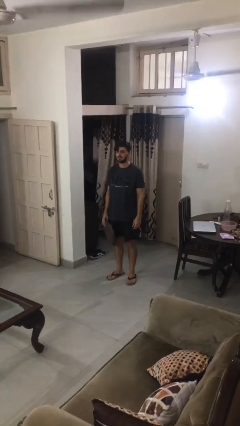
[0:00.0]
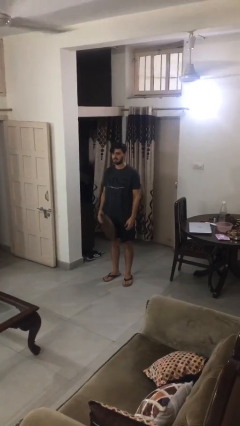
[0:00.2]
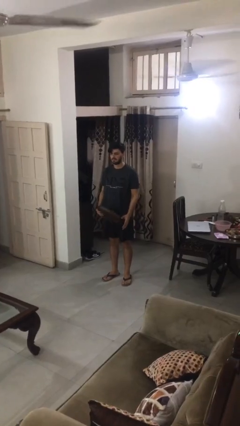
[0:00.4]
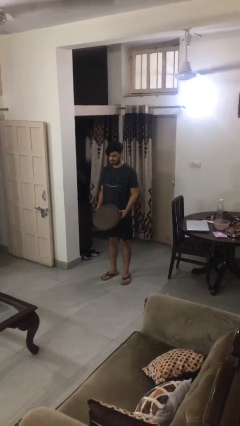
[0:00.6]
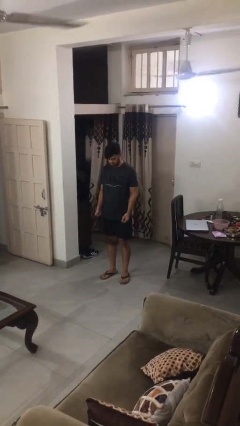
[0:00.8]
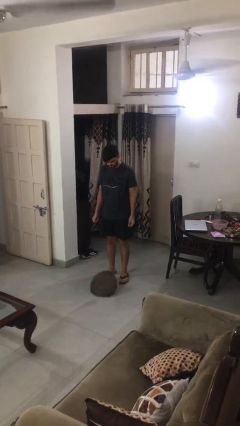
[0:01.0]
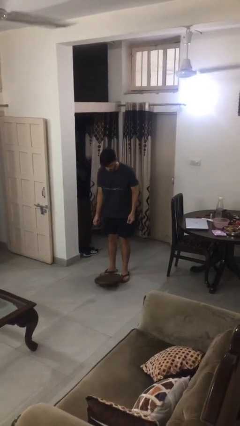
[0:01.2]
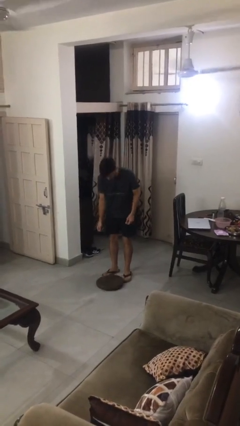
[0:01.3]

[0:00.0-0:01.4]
person drops object

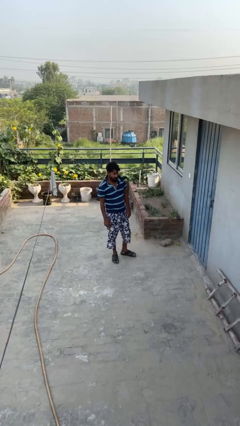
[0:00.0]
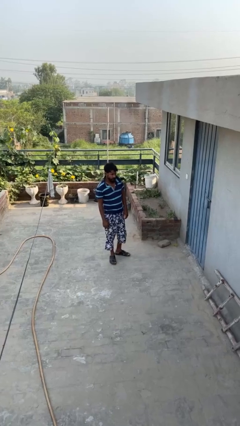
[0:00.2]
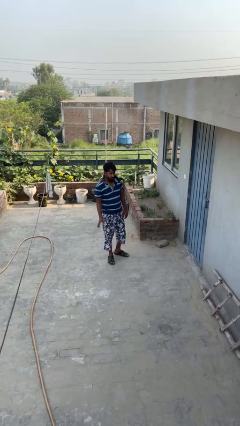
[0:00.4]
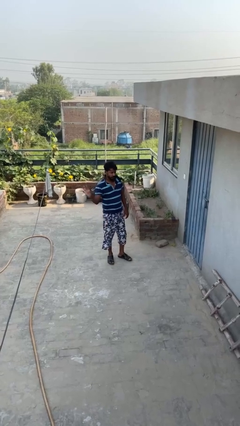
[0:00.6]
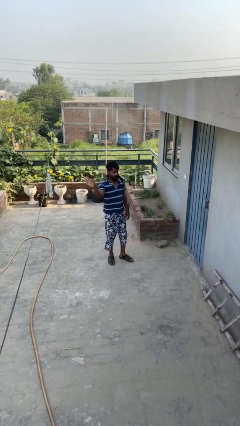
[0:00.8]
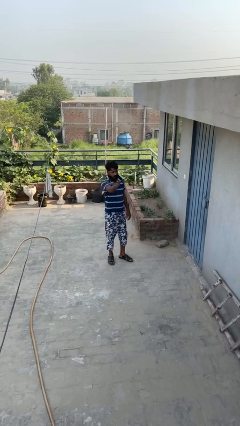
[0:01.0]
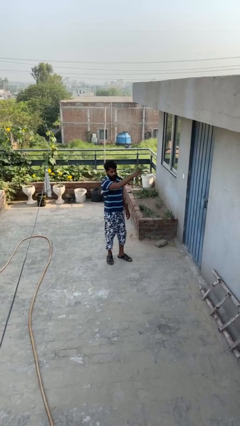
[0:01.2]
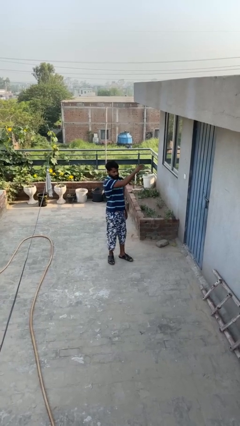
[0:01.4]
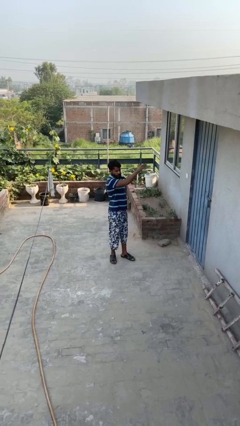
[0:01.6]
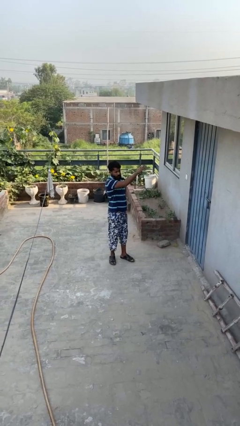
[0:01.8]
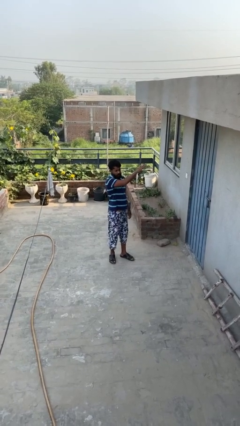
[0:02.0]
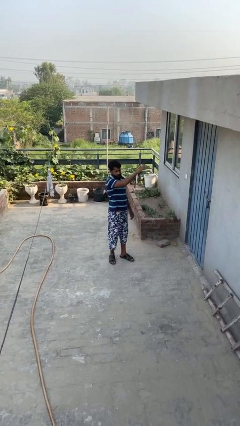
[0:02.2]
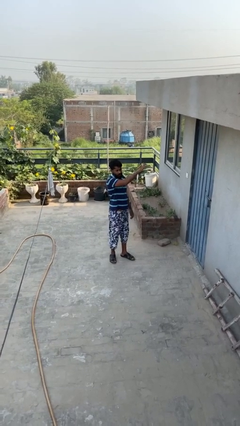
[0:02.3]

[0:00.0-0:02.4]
person gestures swipe left

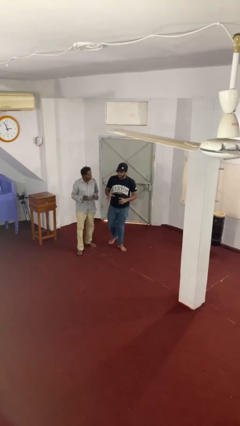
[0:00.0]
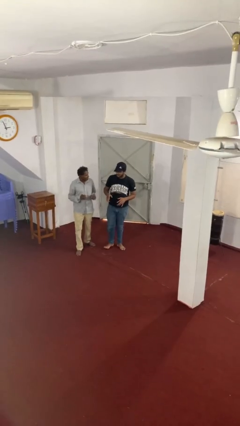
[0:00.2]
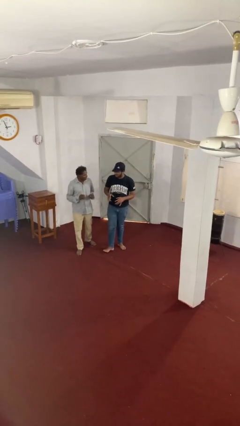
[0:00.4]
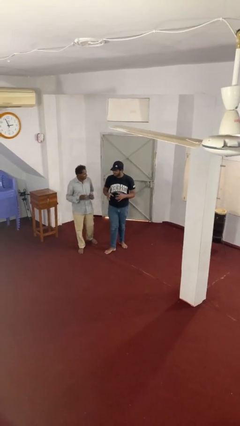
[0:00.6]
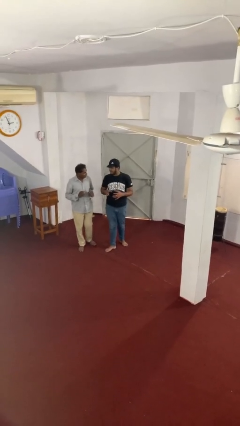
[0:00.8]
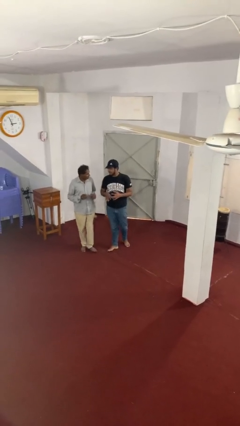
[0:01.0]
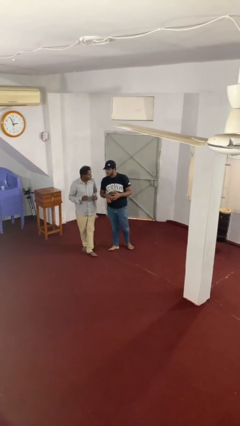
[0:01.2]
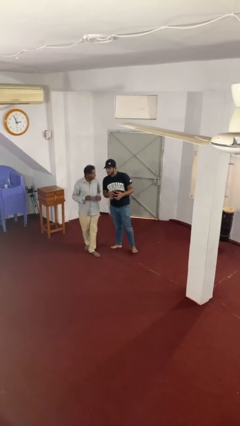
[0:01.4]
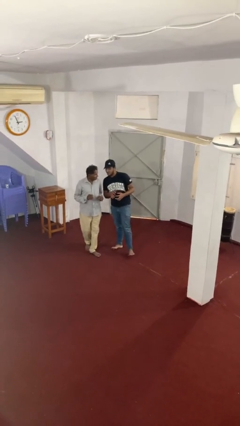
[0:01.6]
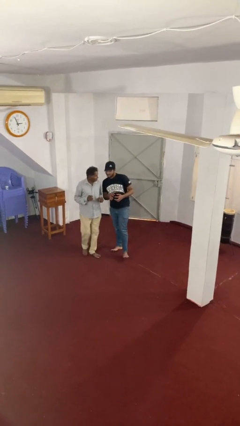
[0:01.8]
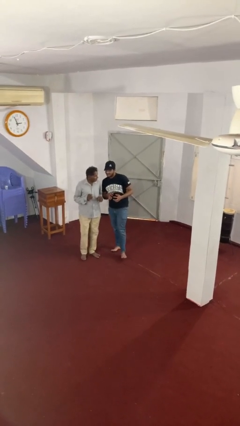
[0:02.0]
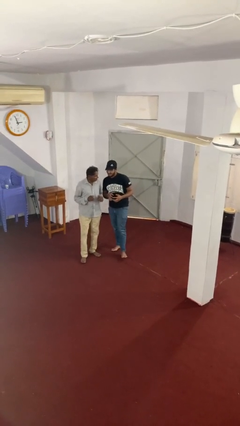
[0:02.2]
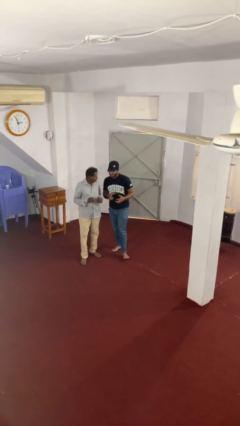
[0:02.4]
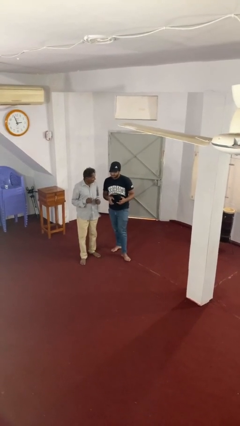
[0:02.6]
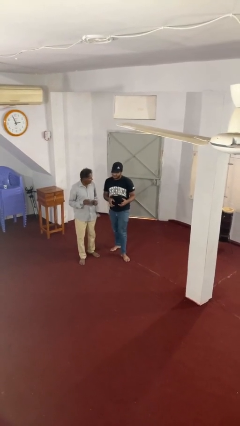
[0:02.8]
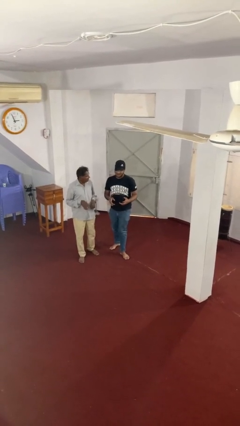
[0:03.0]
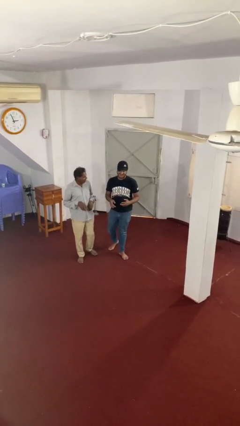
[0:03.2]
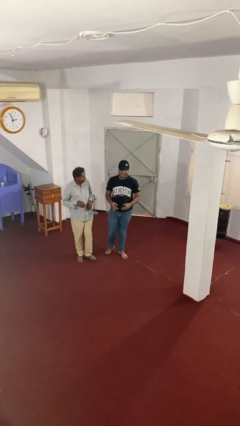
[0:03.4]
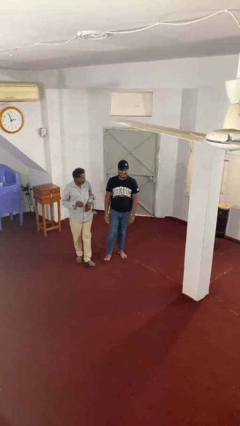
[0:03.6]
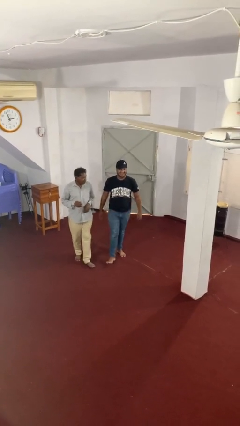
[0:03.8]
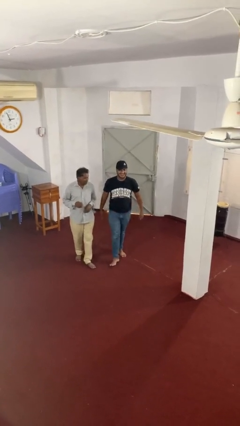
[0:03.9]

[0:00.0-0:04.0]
person talks to person

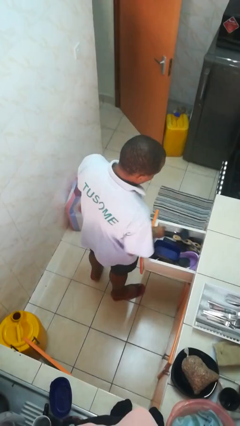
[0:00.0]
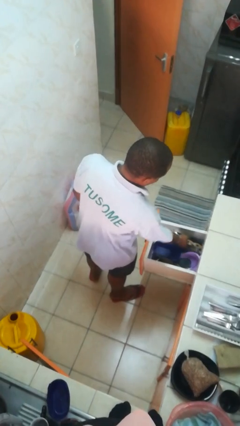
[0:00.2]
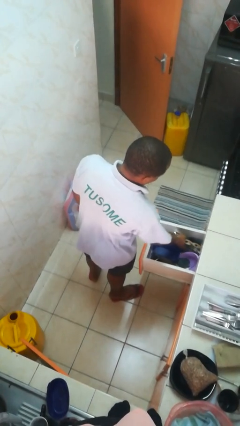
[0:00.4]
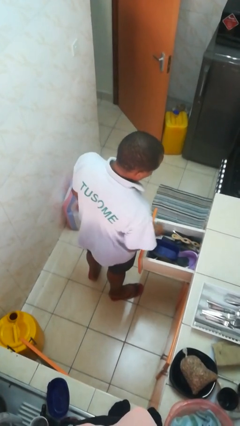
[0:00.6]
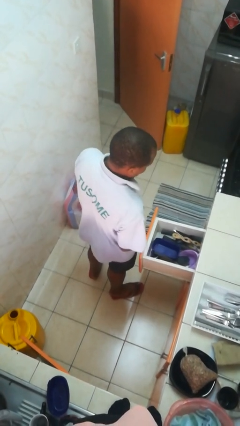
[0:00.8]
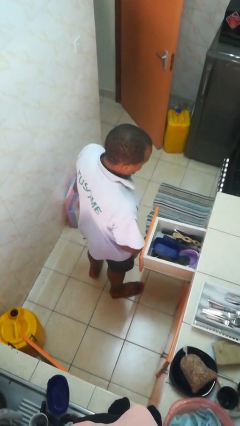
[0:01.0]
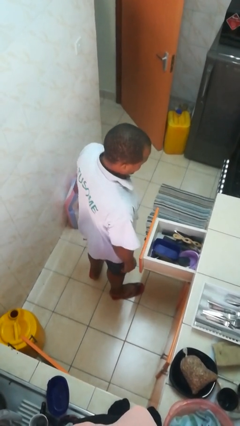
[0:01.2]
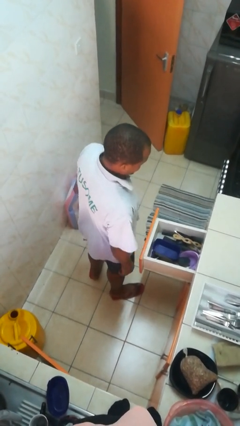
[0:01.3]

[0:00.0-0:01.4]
person puts object into kitchen drawer

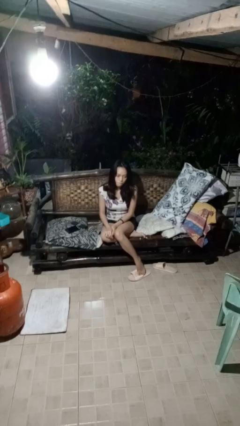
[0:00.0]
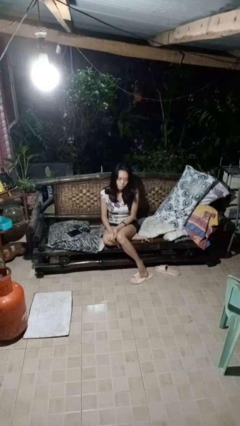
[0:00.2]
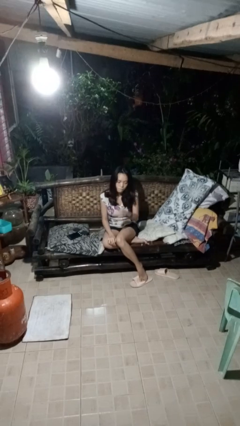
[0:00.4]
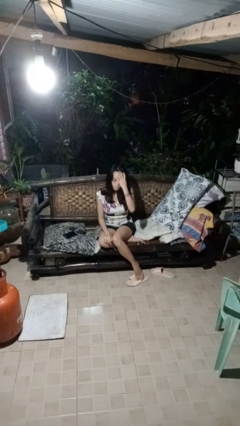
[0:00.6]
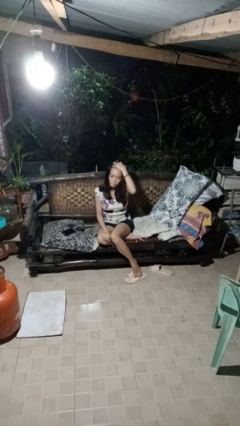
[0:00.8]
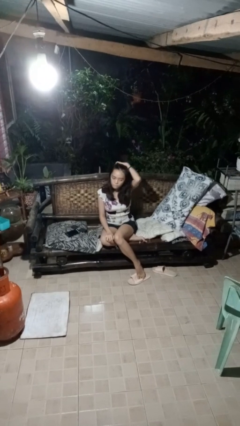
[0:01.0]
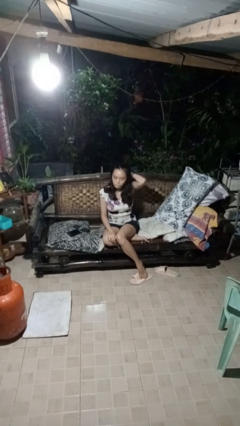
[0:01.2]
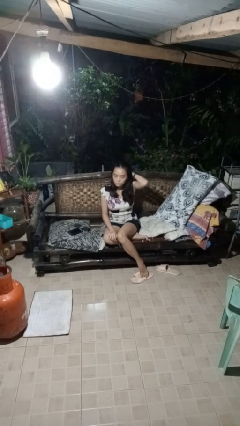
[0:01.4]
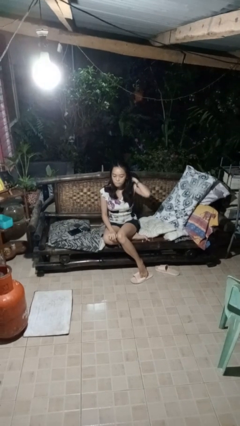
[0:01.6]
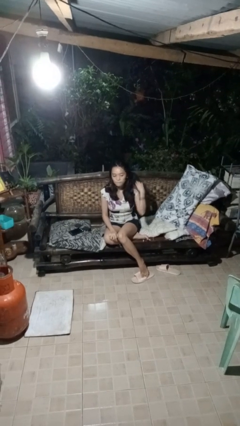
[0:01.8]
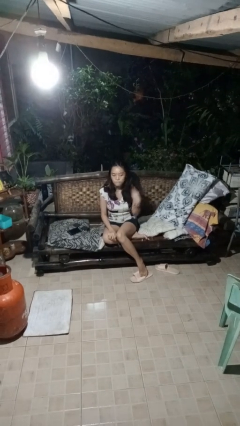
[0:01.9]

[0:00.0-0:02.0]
person searches in couch

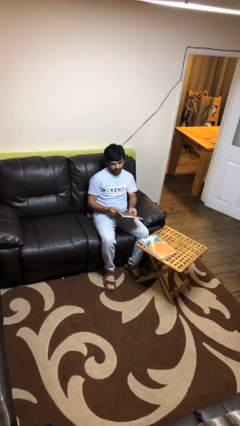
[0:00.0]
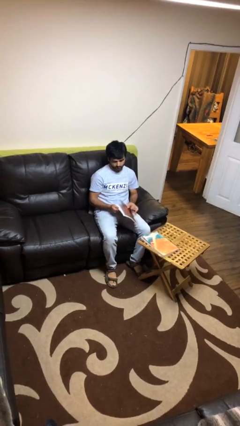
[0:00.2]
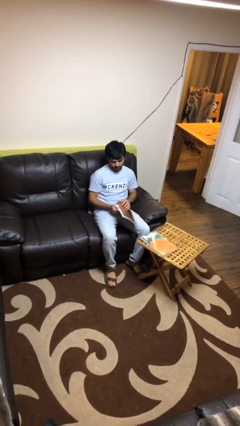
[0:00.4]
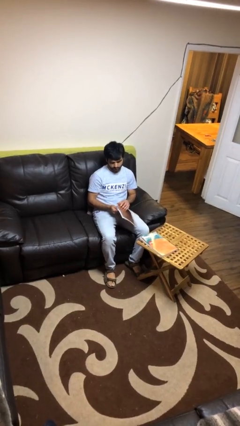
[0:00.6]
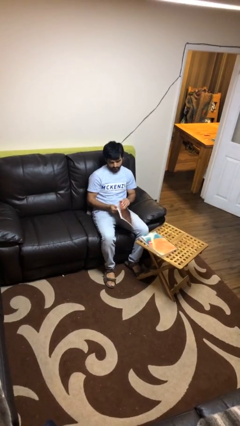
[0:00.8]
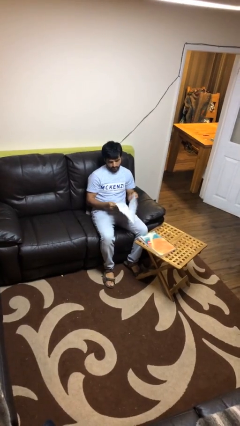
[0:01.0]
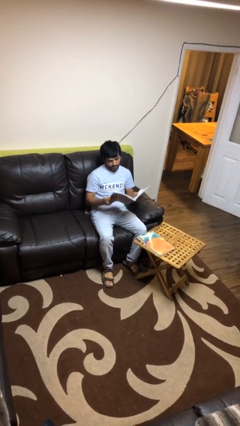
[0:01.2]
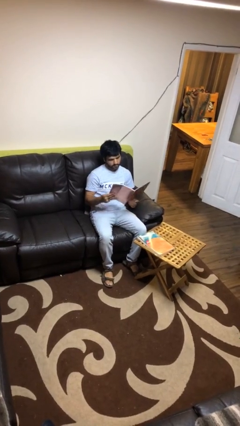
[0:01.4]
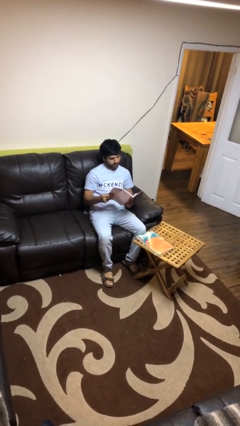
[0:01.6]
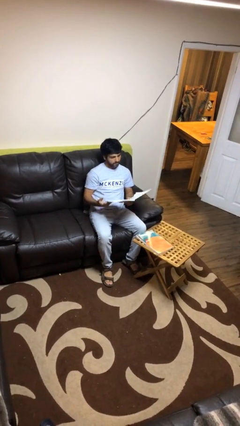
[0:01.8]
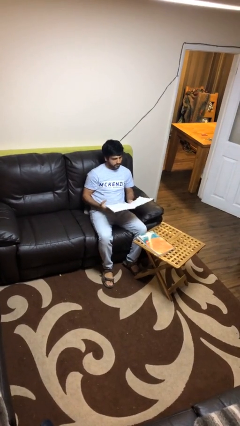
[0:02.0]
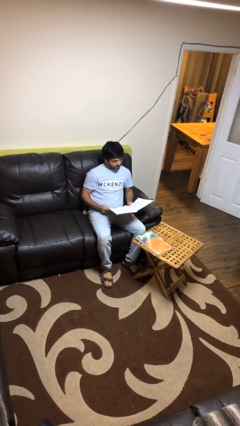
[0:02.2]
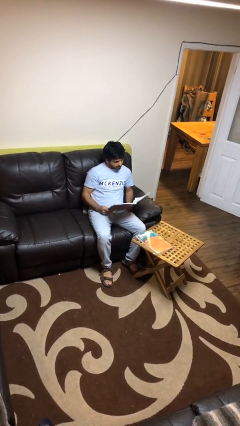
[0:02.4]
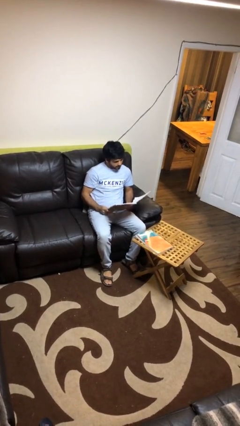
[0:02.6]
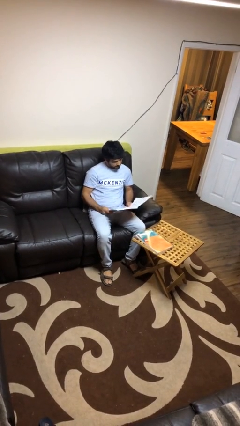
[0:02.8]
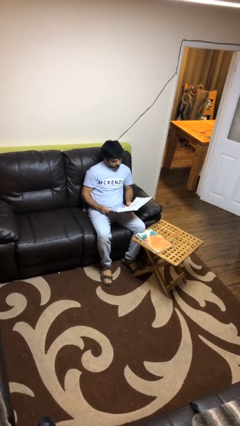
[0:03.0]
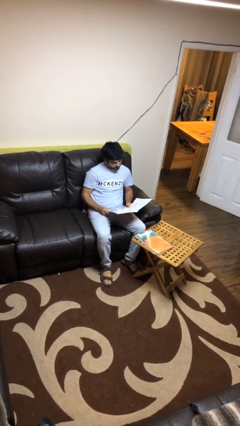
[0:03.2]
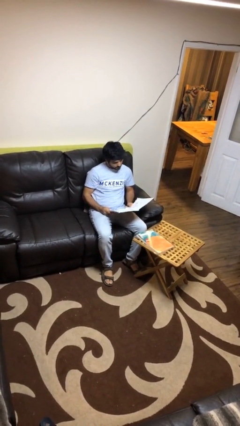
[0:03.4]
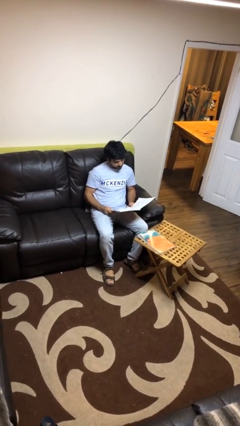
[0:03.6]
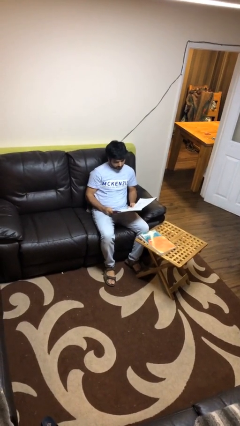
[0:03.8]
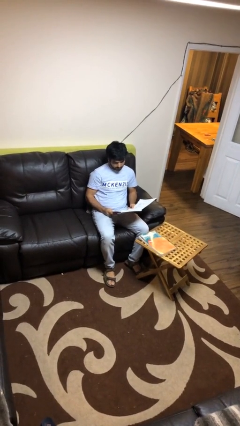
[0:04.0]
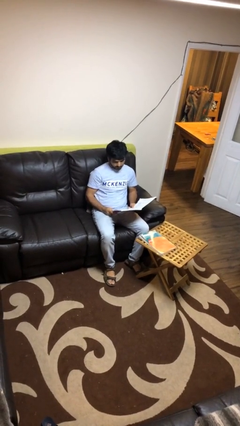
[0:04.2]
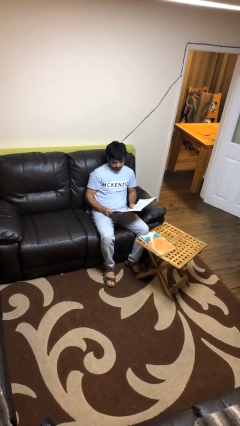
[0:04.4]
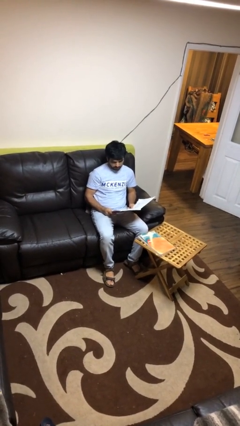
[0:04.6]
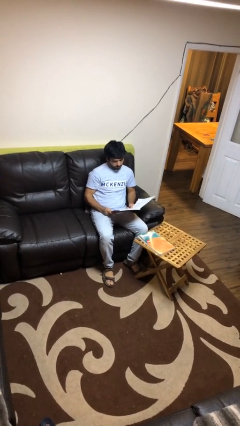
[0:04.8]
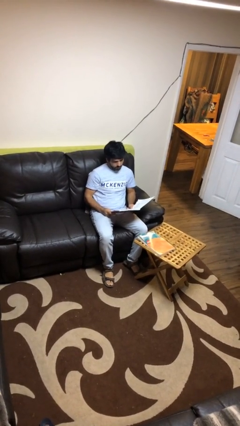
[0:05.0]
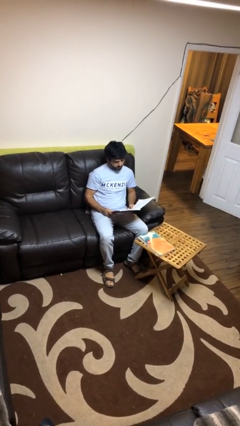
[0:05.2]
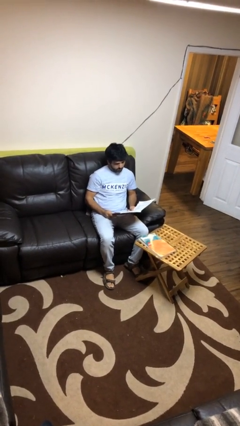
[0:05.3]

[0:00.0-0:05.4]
person reads document

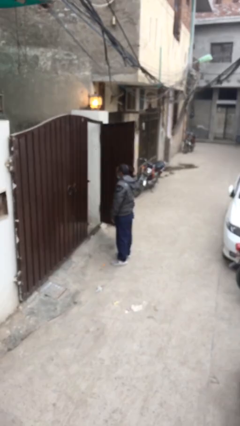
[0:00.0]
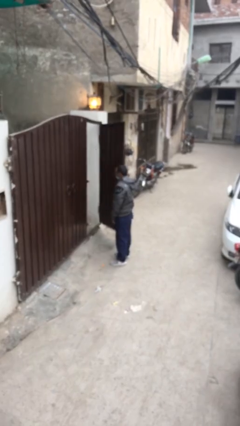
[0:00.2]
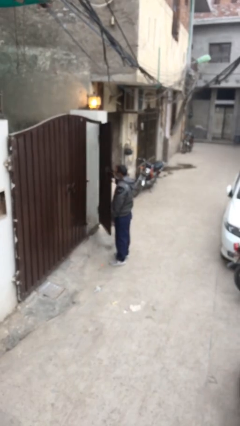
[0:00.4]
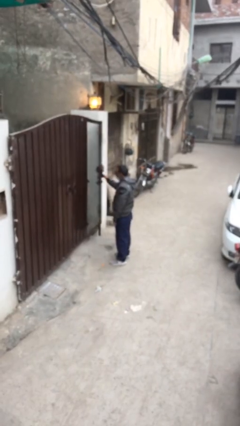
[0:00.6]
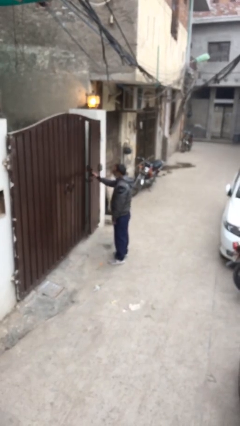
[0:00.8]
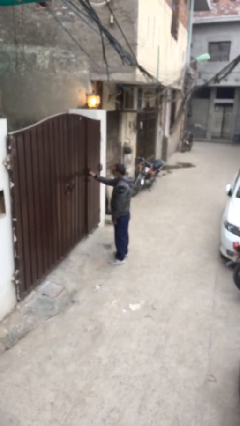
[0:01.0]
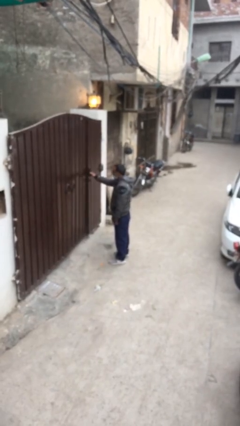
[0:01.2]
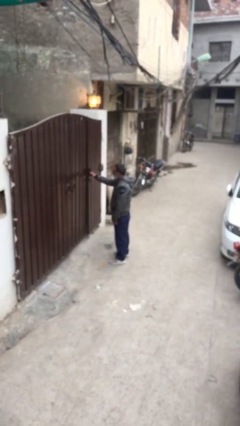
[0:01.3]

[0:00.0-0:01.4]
person closes facility door
